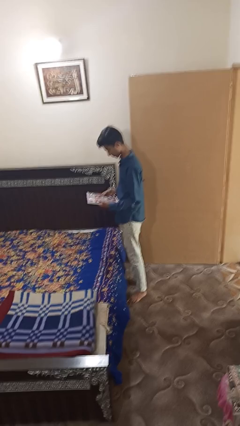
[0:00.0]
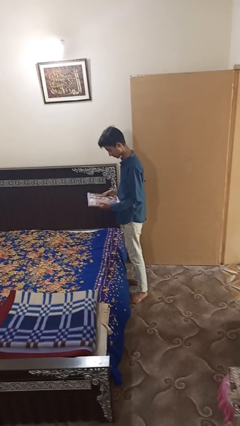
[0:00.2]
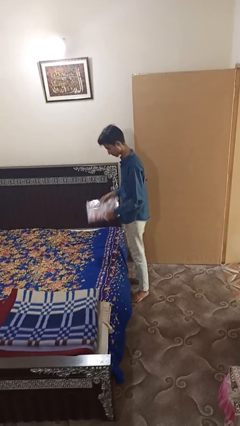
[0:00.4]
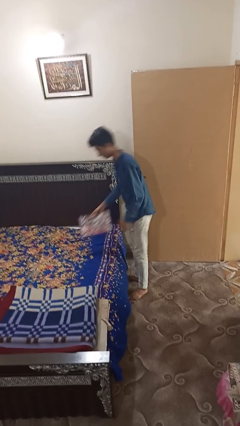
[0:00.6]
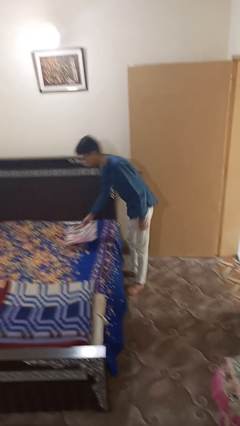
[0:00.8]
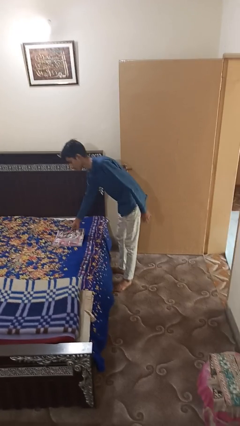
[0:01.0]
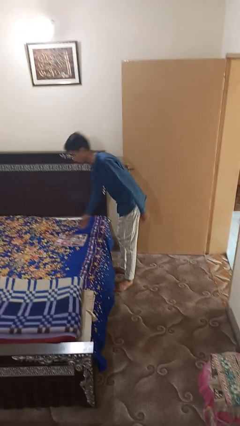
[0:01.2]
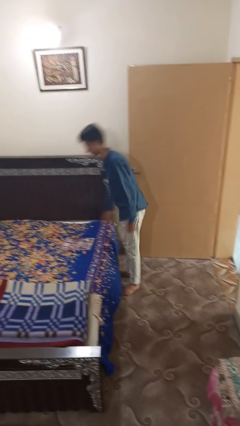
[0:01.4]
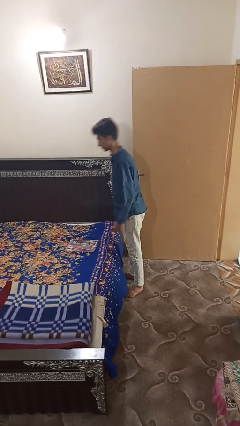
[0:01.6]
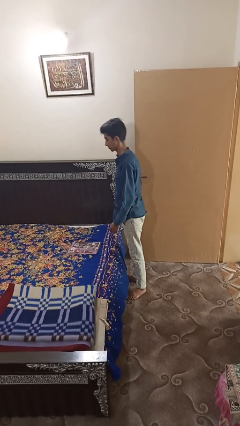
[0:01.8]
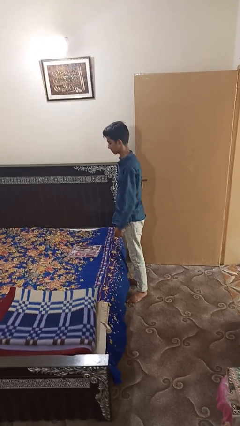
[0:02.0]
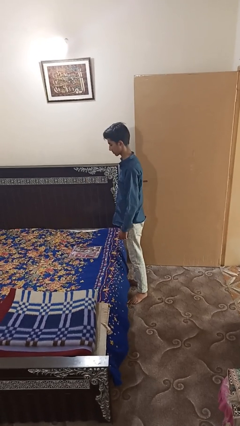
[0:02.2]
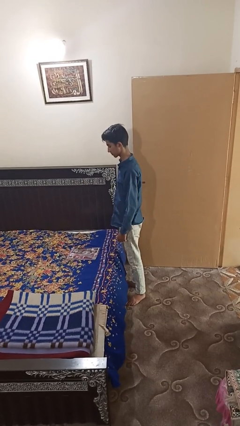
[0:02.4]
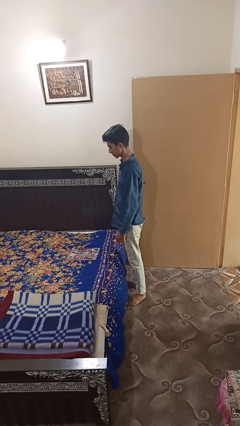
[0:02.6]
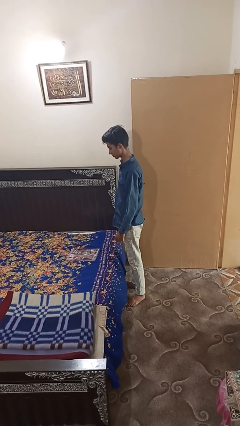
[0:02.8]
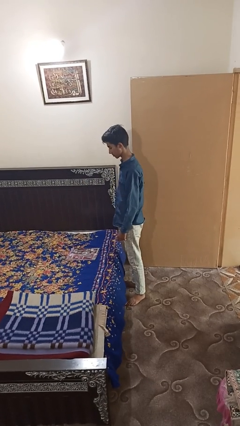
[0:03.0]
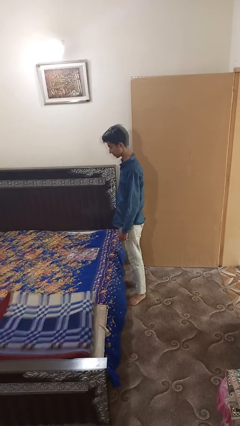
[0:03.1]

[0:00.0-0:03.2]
person puts down object on bed

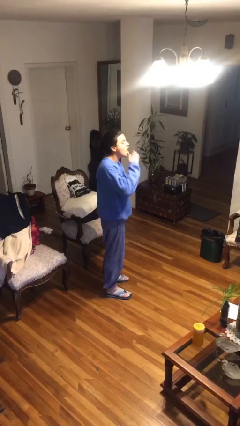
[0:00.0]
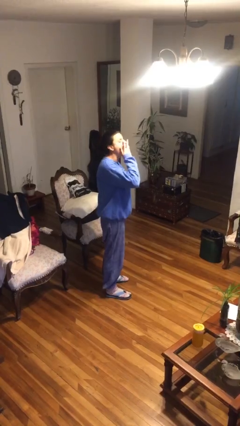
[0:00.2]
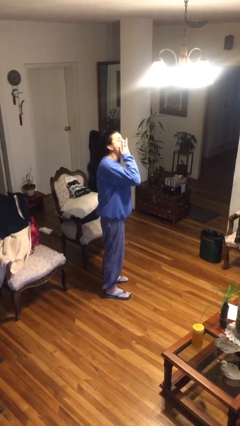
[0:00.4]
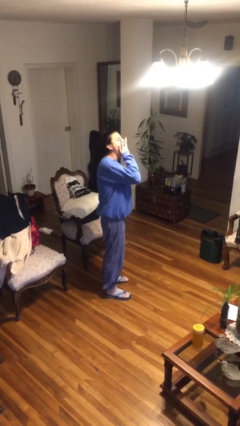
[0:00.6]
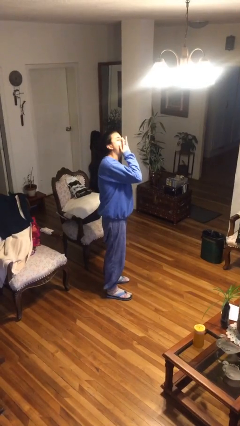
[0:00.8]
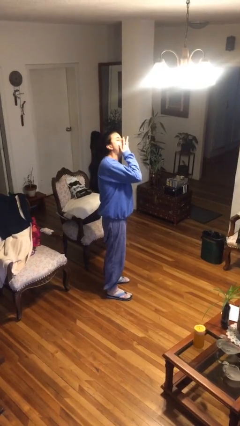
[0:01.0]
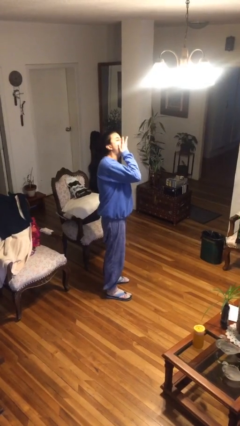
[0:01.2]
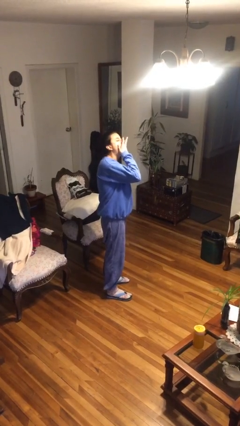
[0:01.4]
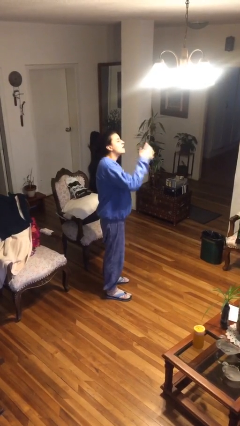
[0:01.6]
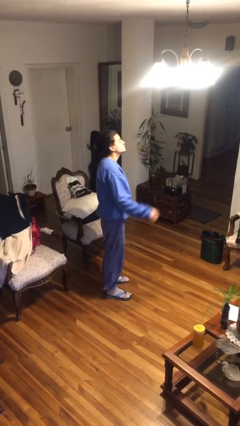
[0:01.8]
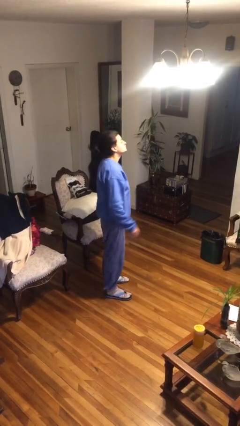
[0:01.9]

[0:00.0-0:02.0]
person yawns

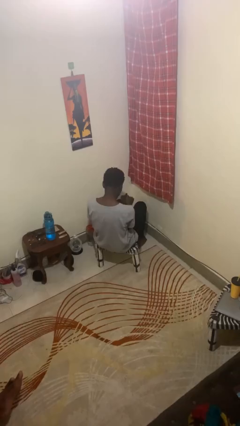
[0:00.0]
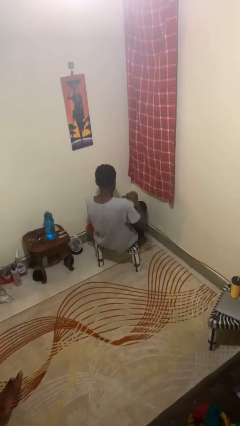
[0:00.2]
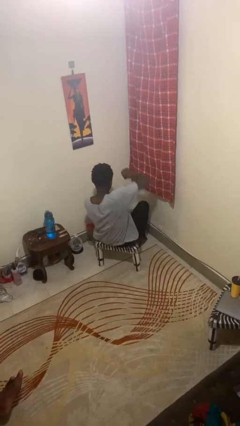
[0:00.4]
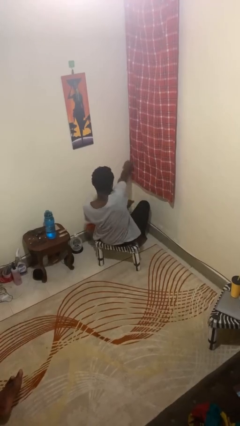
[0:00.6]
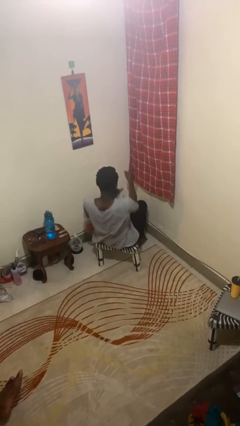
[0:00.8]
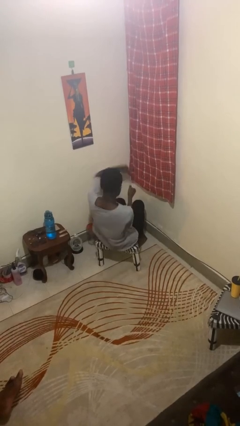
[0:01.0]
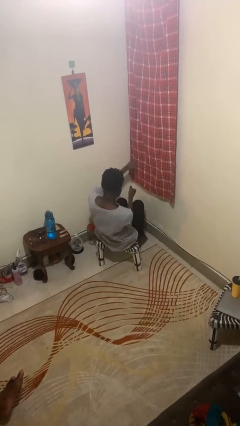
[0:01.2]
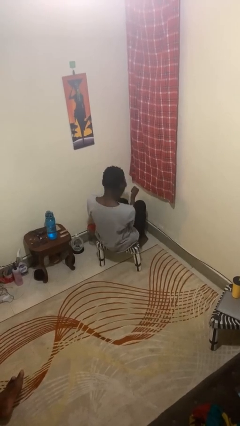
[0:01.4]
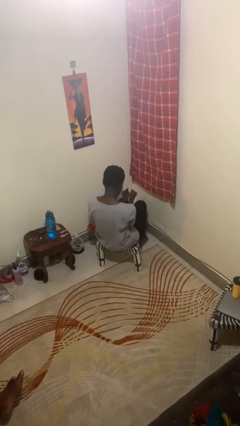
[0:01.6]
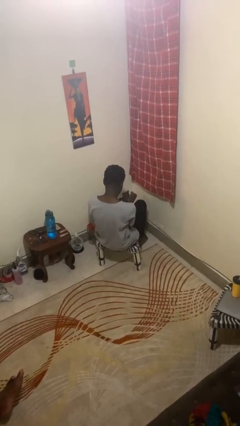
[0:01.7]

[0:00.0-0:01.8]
person punches

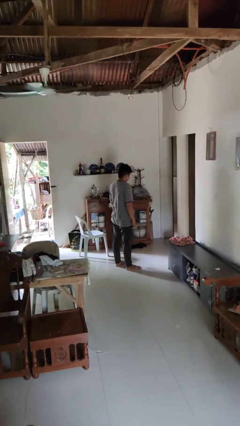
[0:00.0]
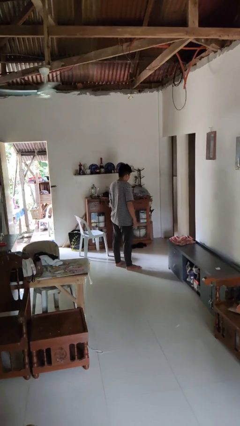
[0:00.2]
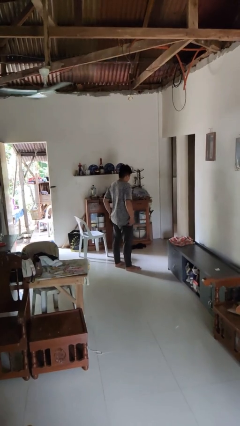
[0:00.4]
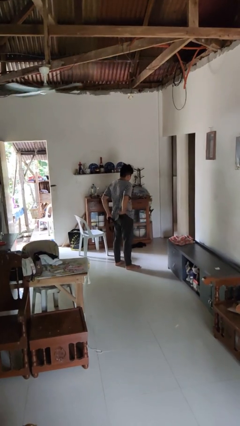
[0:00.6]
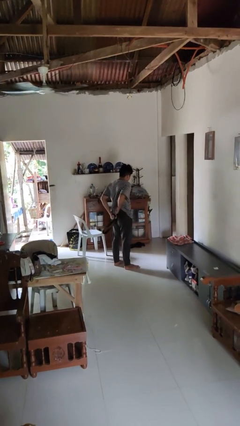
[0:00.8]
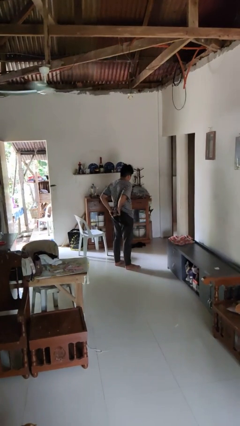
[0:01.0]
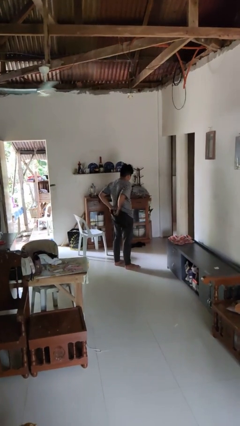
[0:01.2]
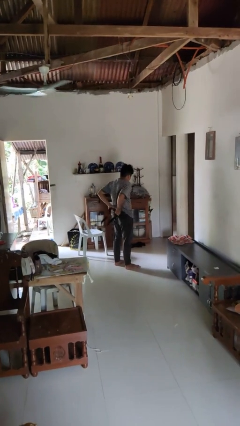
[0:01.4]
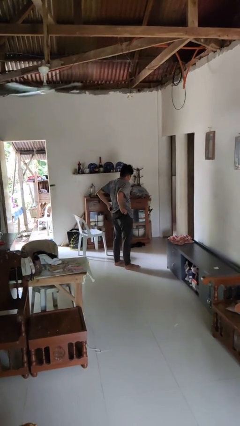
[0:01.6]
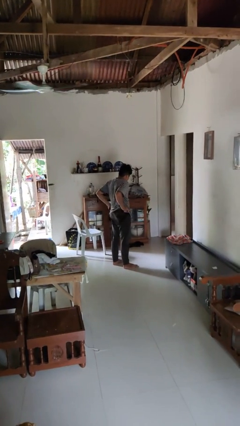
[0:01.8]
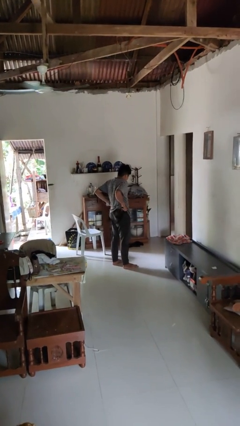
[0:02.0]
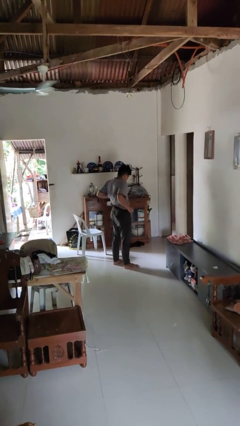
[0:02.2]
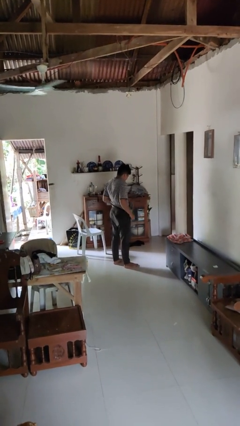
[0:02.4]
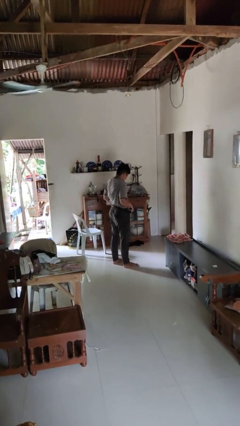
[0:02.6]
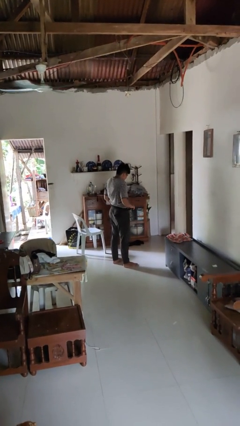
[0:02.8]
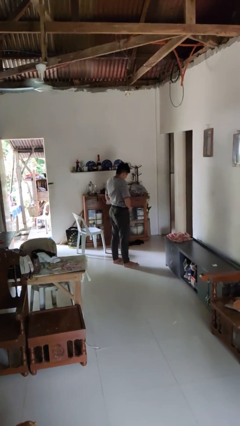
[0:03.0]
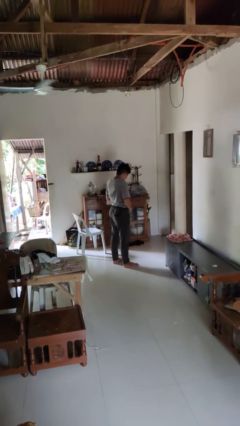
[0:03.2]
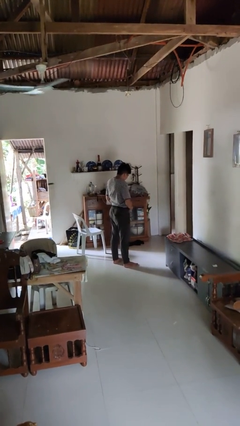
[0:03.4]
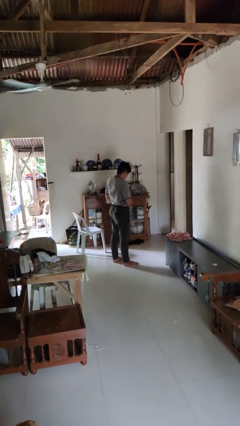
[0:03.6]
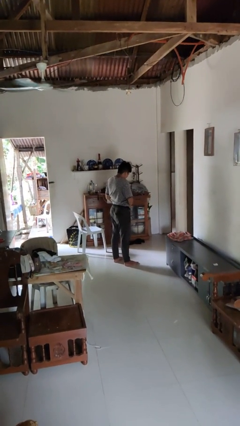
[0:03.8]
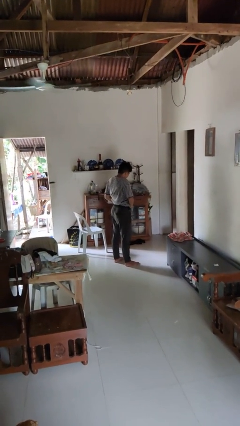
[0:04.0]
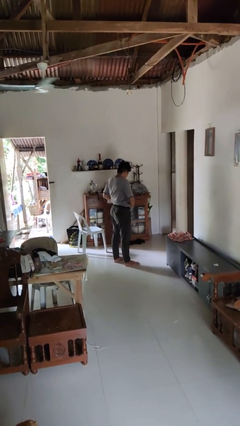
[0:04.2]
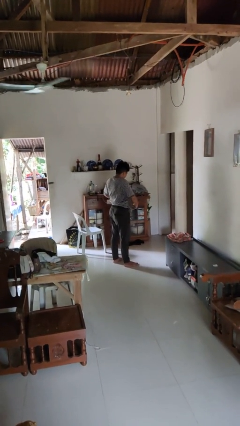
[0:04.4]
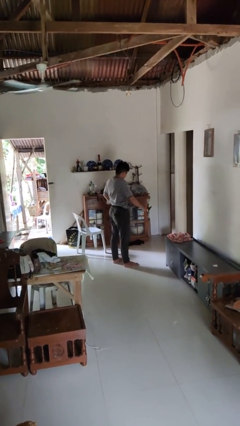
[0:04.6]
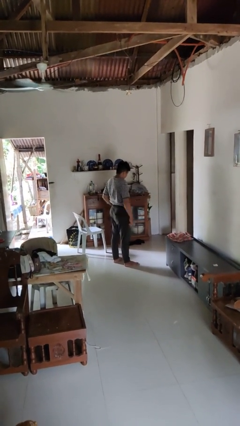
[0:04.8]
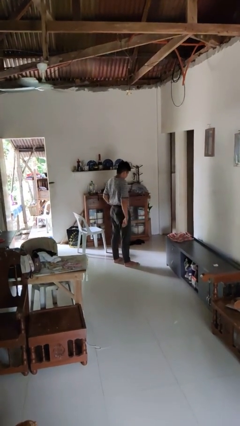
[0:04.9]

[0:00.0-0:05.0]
person puts on belt

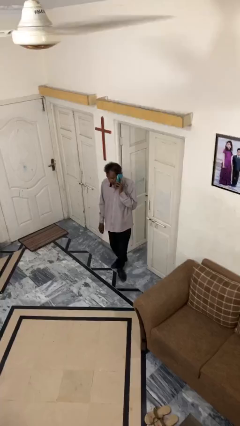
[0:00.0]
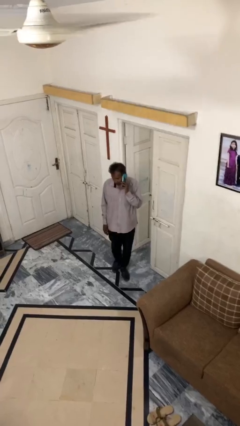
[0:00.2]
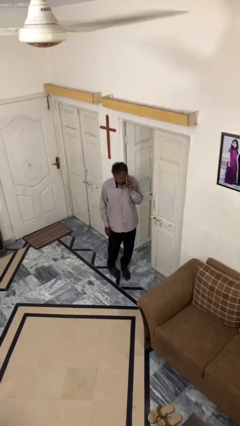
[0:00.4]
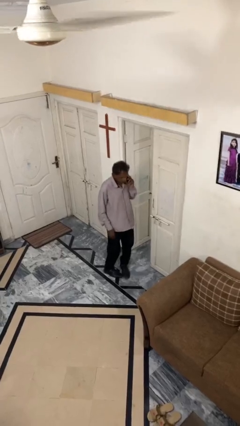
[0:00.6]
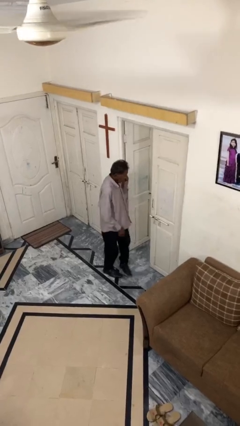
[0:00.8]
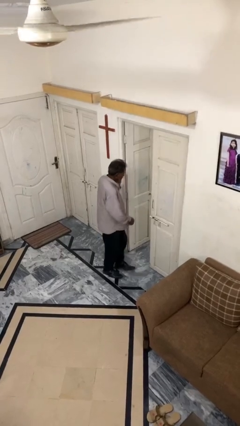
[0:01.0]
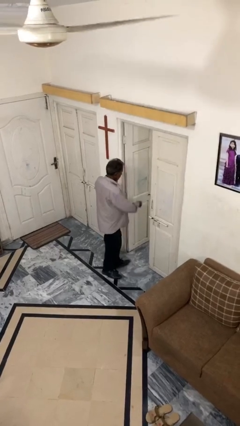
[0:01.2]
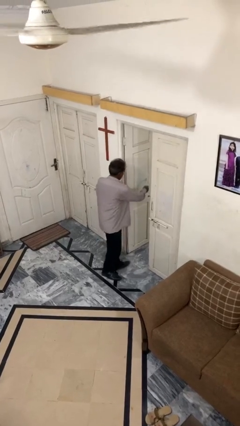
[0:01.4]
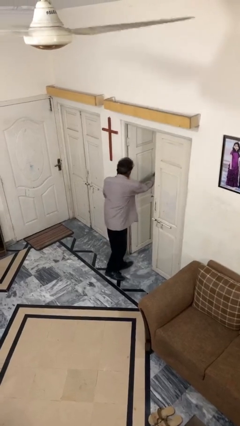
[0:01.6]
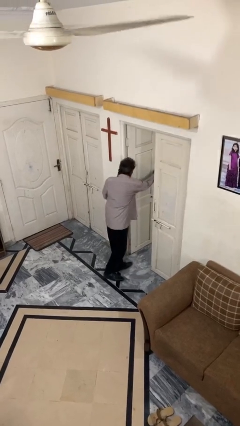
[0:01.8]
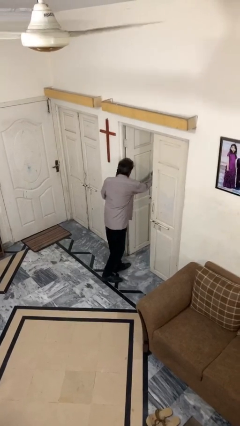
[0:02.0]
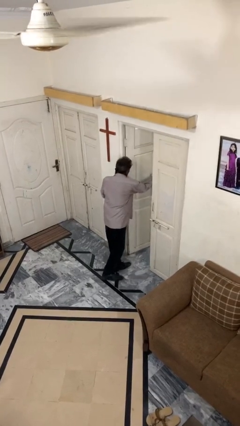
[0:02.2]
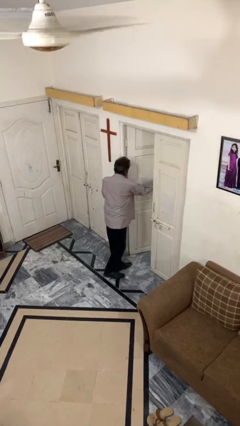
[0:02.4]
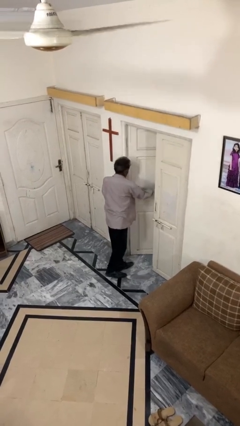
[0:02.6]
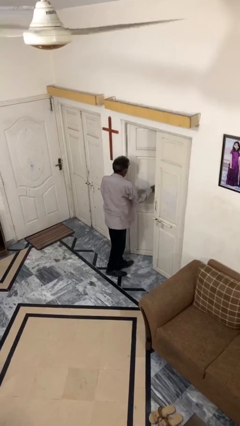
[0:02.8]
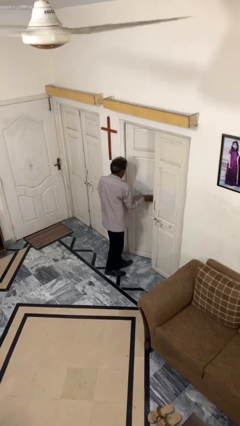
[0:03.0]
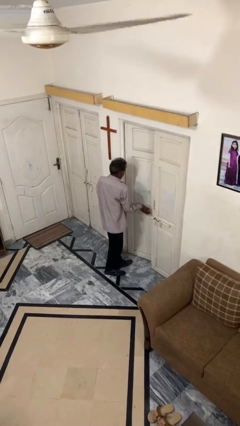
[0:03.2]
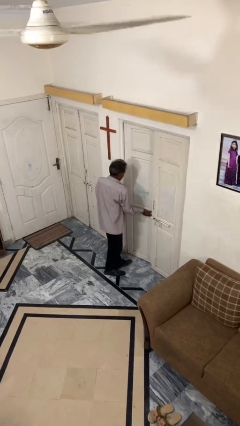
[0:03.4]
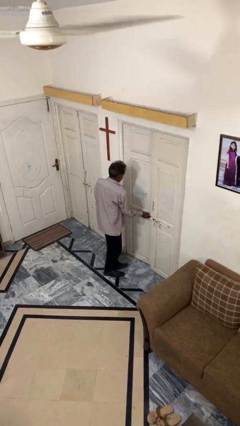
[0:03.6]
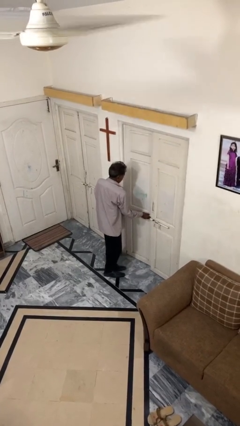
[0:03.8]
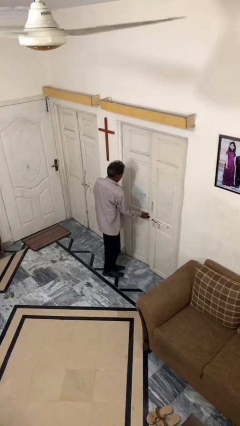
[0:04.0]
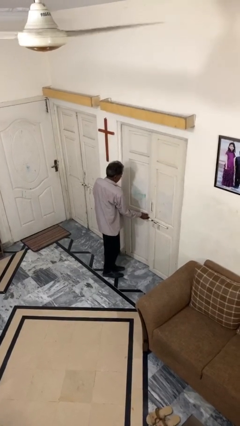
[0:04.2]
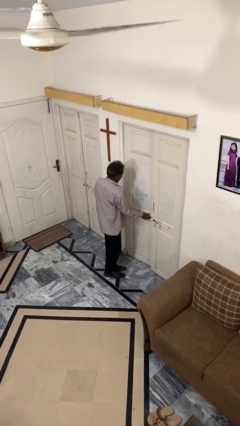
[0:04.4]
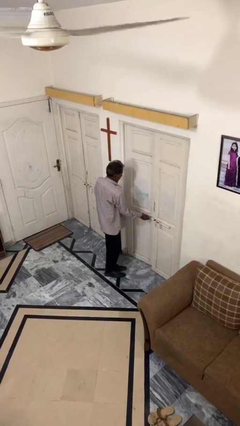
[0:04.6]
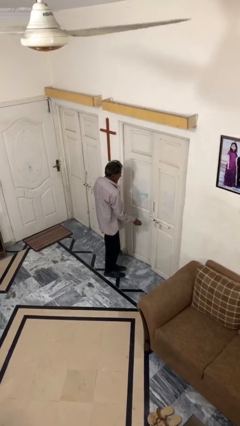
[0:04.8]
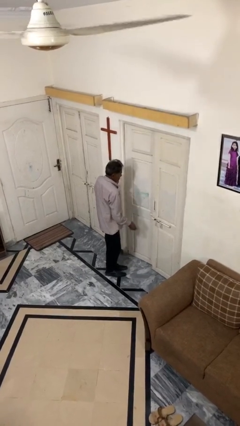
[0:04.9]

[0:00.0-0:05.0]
person closes facility door

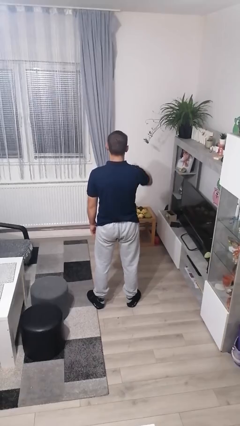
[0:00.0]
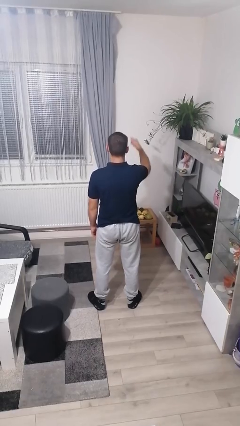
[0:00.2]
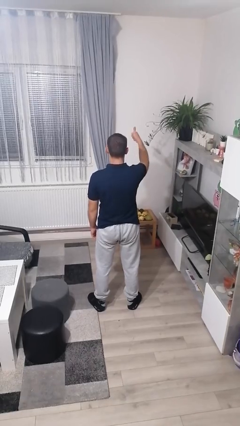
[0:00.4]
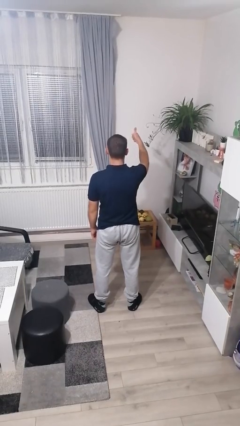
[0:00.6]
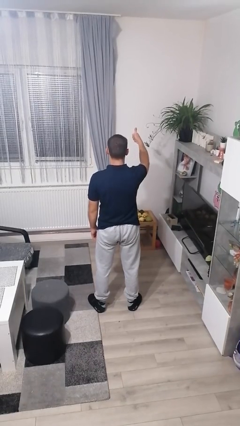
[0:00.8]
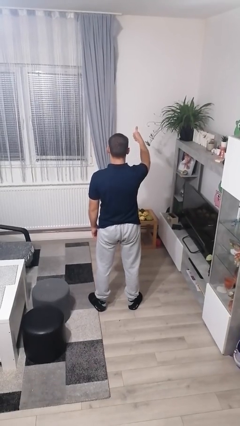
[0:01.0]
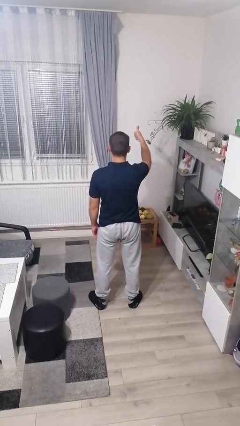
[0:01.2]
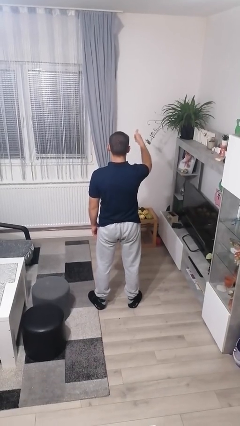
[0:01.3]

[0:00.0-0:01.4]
person gestures number one
